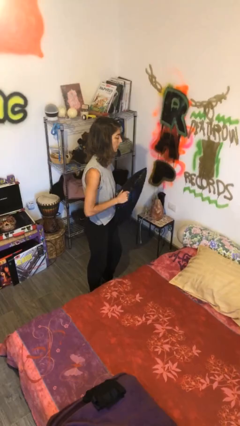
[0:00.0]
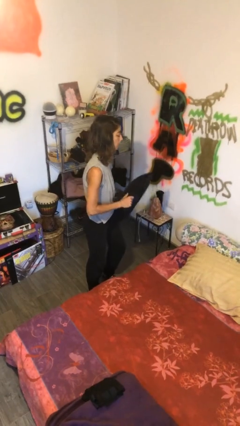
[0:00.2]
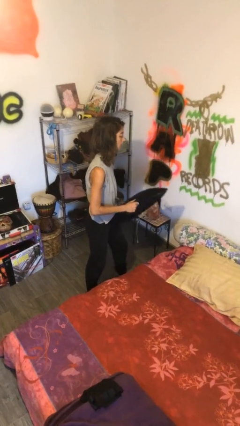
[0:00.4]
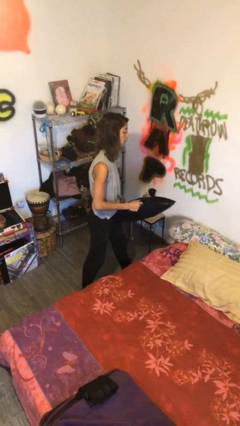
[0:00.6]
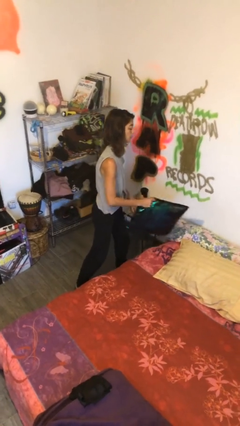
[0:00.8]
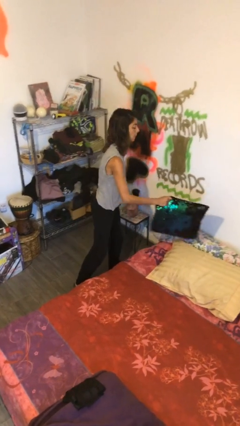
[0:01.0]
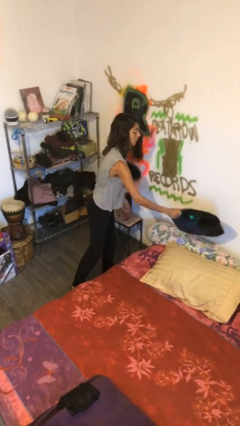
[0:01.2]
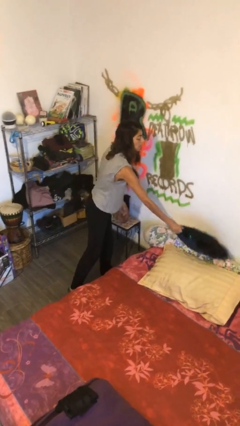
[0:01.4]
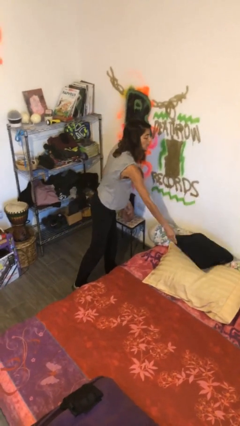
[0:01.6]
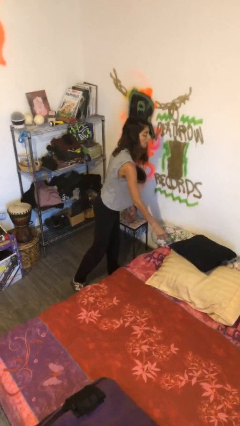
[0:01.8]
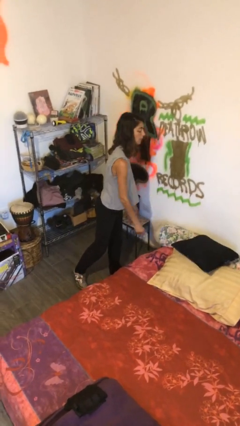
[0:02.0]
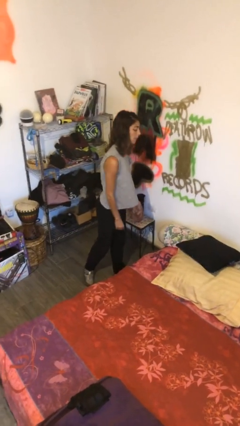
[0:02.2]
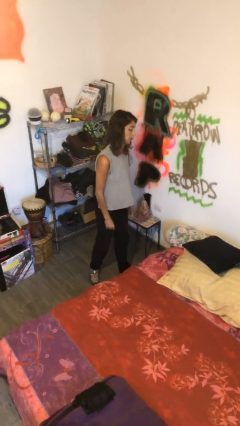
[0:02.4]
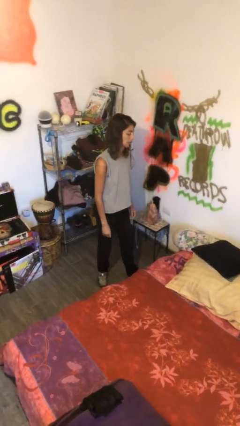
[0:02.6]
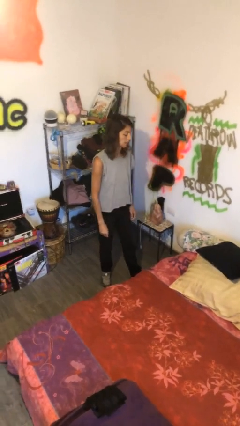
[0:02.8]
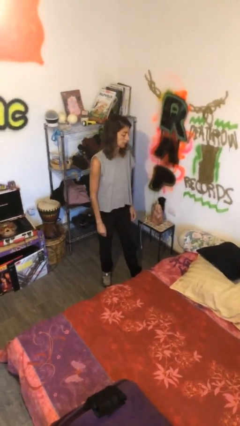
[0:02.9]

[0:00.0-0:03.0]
person puts down object on bed

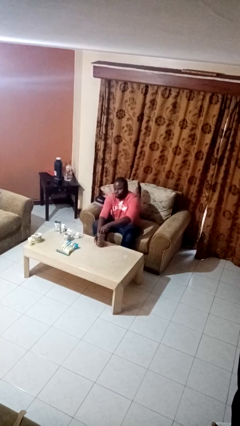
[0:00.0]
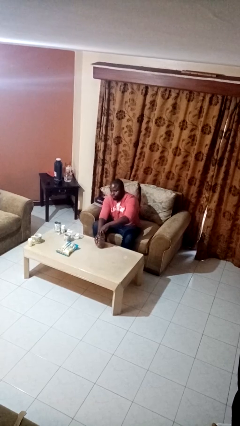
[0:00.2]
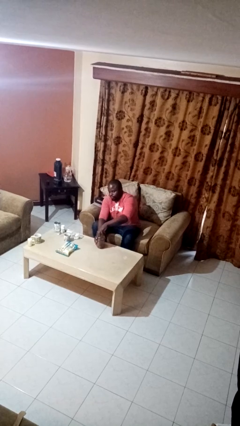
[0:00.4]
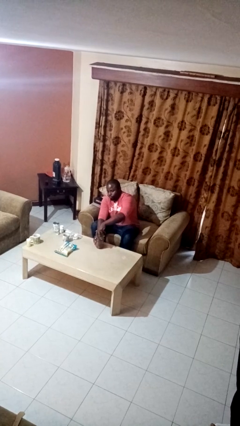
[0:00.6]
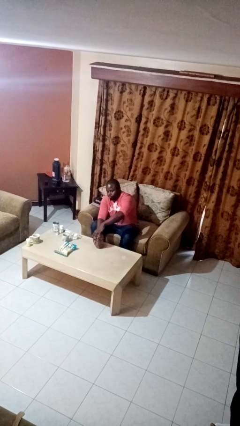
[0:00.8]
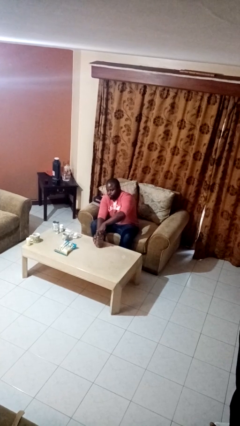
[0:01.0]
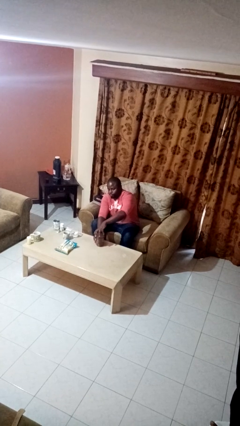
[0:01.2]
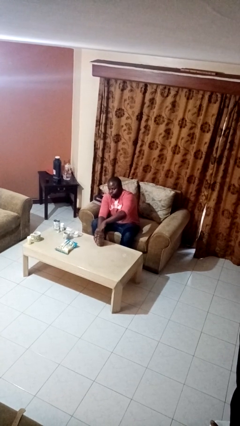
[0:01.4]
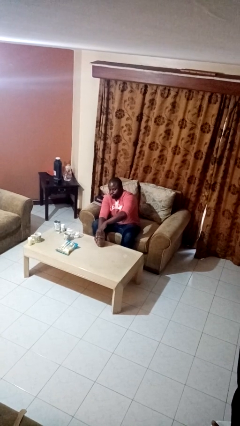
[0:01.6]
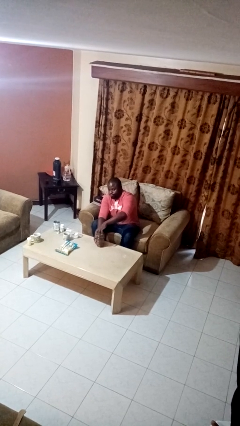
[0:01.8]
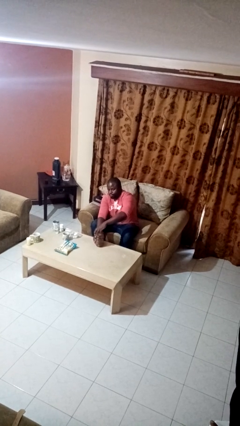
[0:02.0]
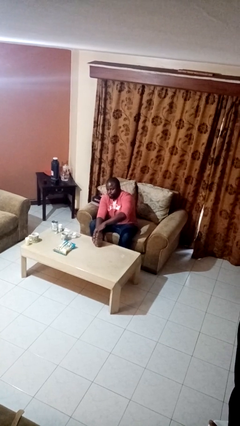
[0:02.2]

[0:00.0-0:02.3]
person closes jar

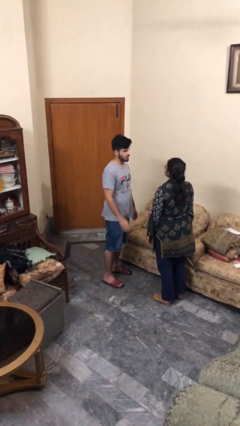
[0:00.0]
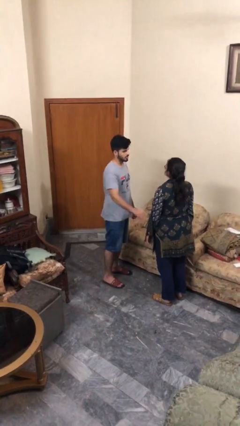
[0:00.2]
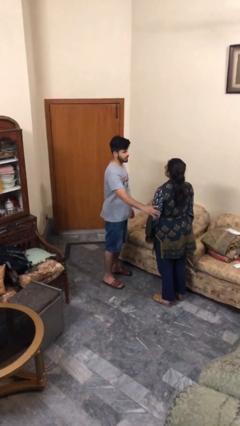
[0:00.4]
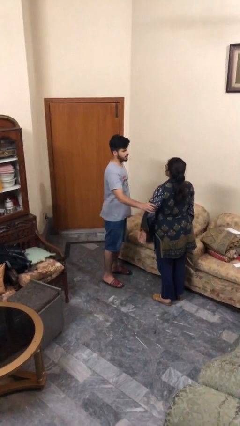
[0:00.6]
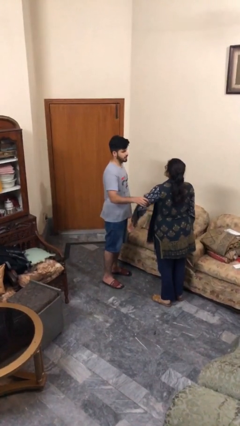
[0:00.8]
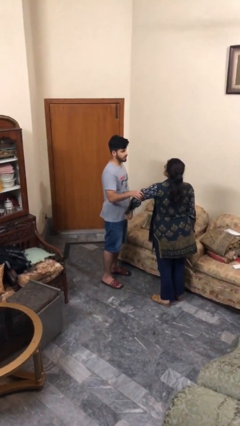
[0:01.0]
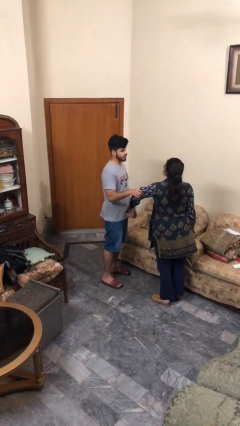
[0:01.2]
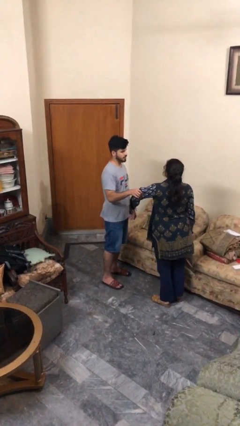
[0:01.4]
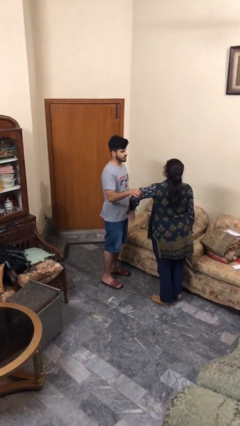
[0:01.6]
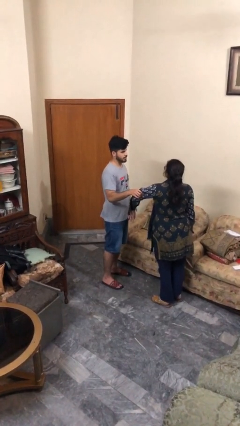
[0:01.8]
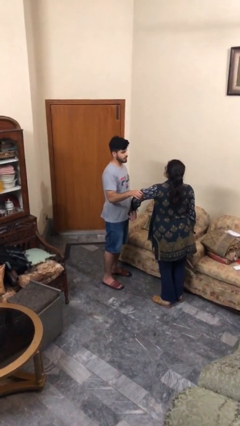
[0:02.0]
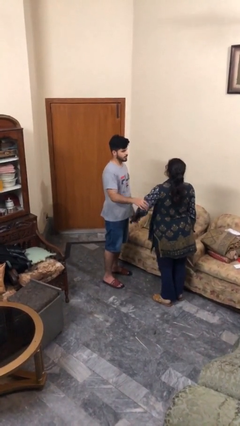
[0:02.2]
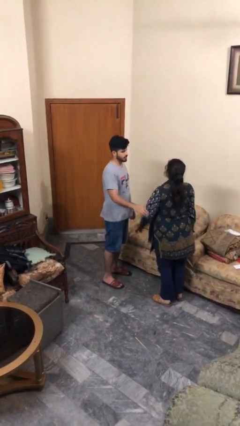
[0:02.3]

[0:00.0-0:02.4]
person grabs person by bicep

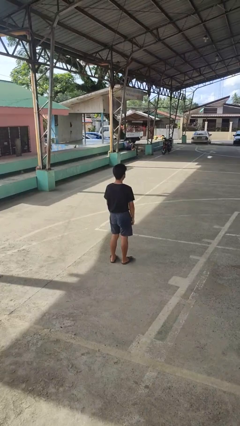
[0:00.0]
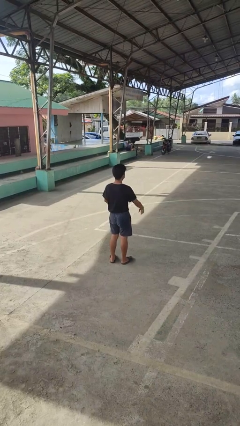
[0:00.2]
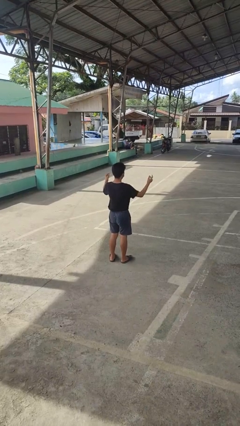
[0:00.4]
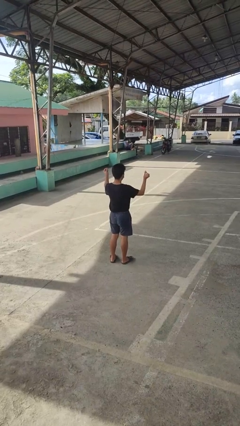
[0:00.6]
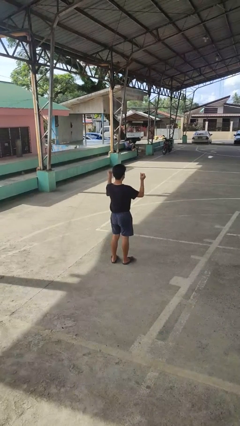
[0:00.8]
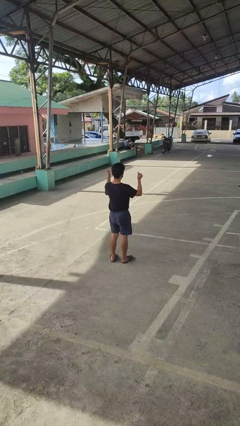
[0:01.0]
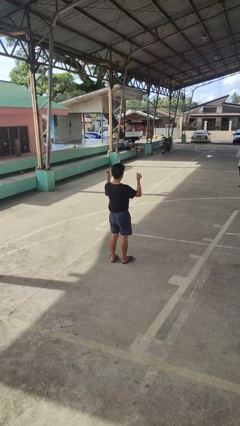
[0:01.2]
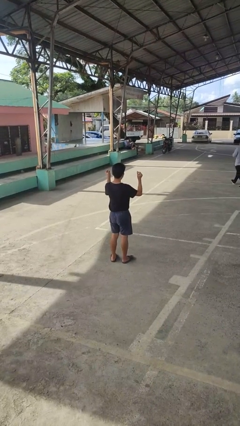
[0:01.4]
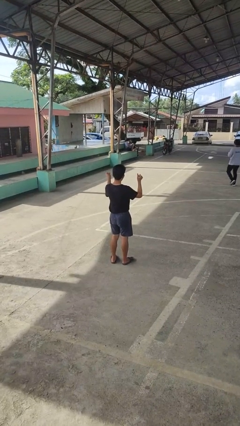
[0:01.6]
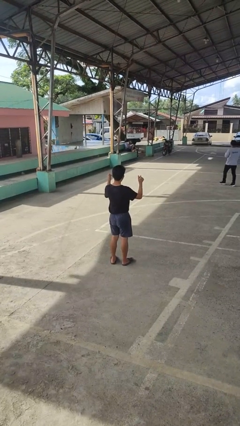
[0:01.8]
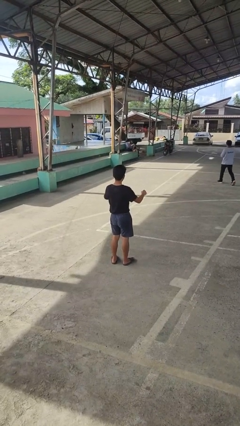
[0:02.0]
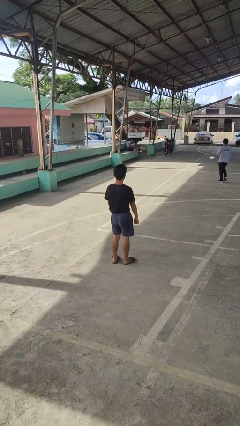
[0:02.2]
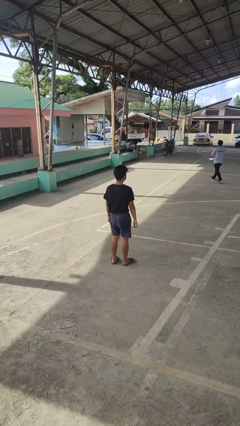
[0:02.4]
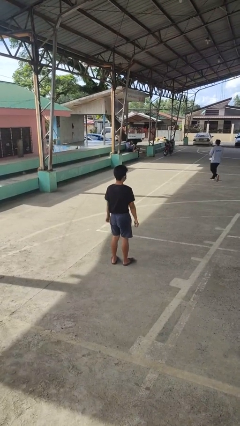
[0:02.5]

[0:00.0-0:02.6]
person snaps fingers

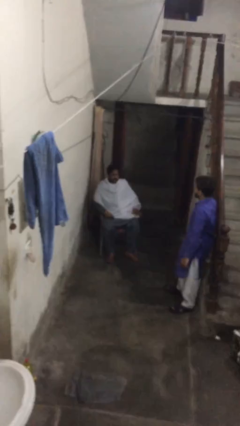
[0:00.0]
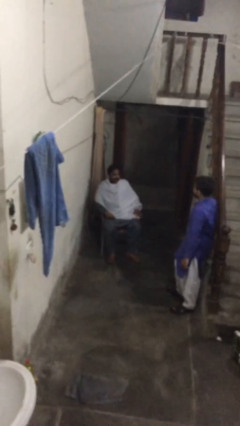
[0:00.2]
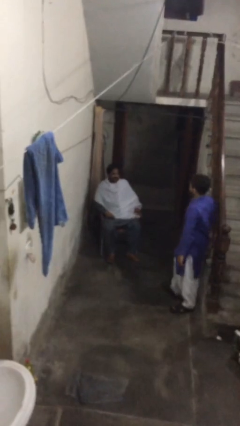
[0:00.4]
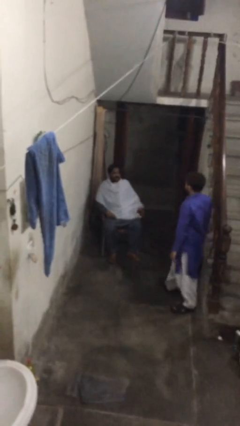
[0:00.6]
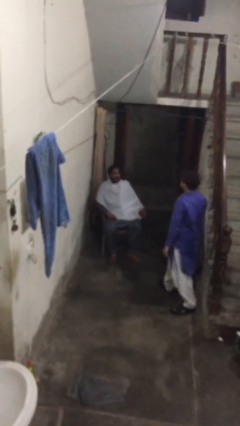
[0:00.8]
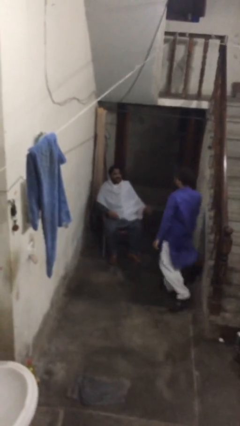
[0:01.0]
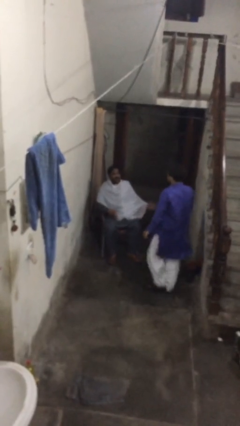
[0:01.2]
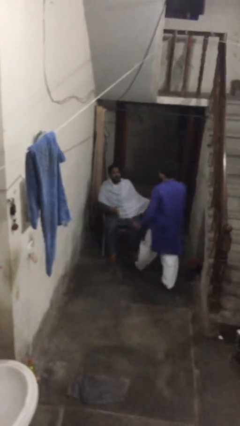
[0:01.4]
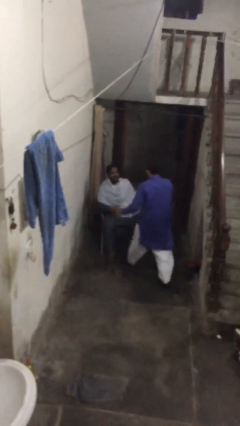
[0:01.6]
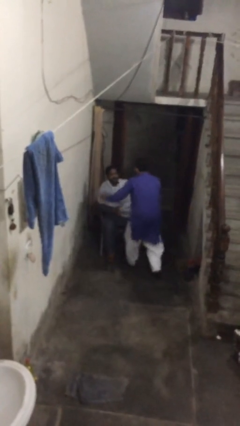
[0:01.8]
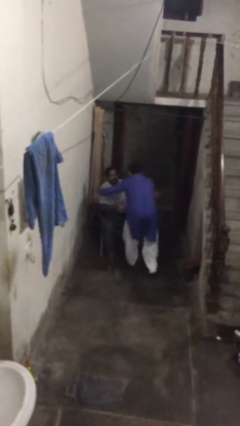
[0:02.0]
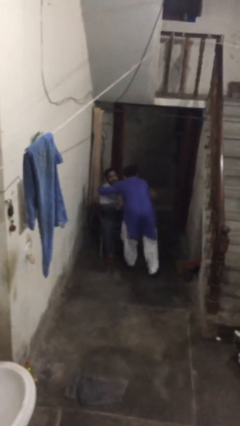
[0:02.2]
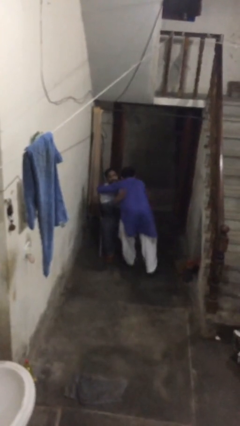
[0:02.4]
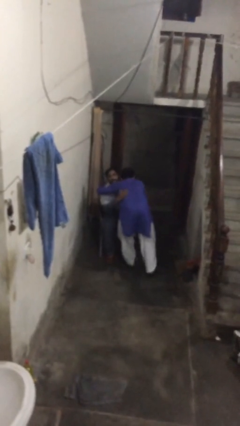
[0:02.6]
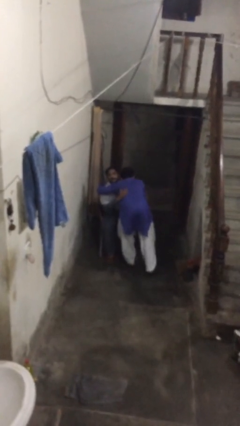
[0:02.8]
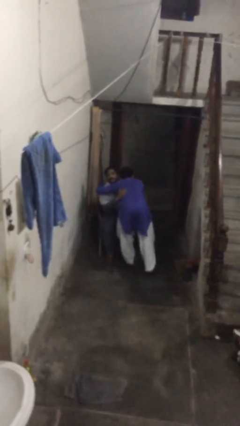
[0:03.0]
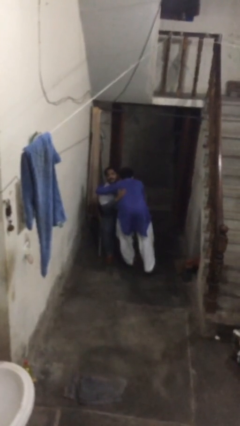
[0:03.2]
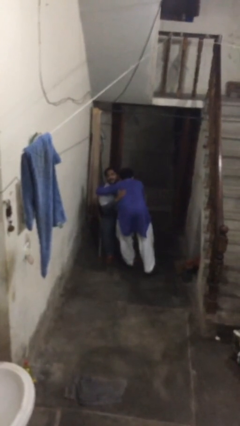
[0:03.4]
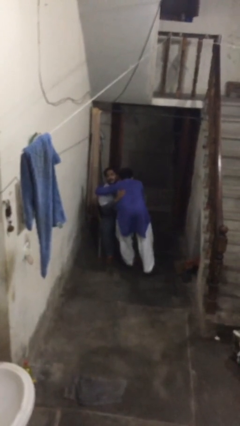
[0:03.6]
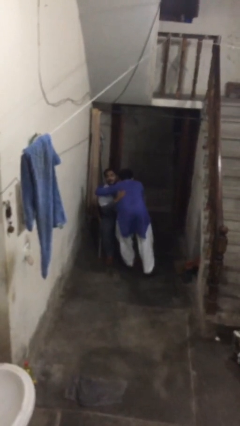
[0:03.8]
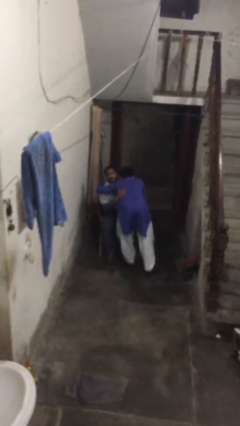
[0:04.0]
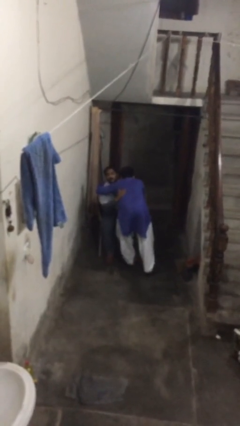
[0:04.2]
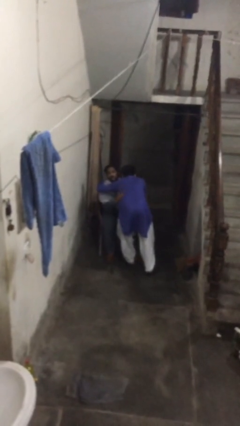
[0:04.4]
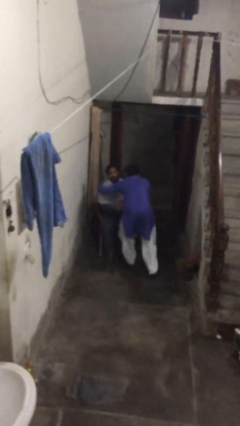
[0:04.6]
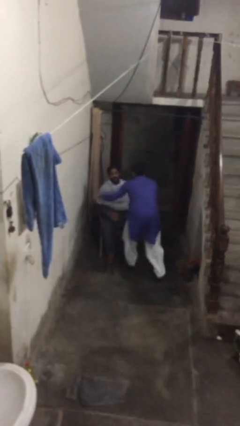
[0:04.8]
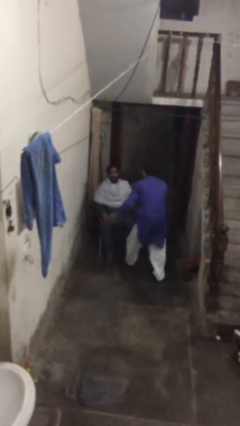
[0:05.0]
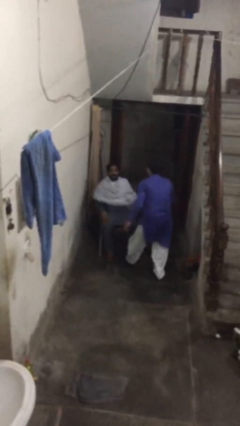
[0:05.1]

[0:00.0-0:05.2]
person embraces person

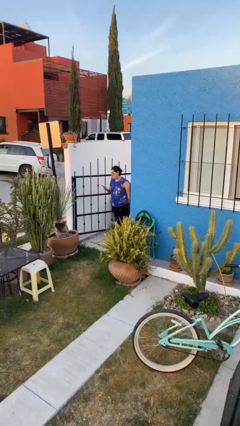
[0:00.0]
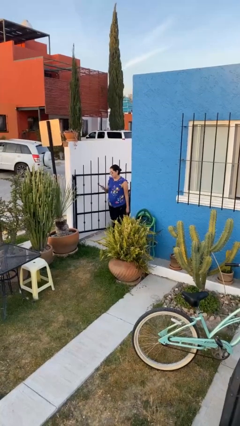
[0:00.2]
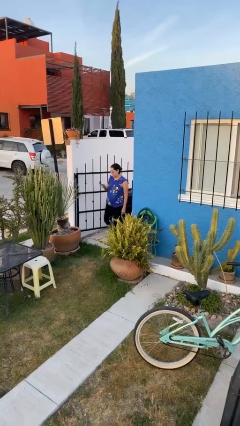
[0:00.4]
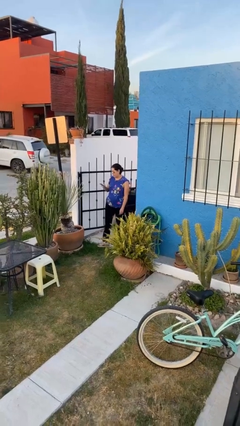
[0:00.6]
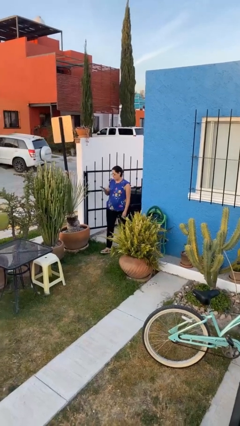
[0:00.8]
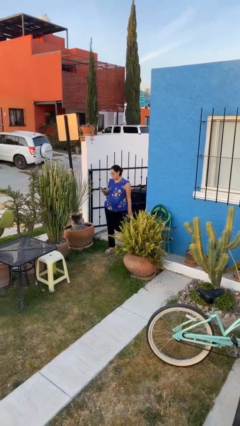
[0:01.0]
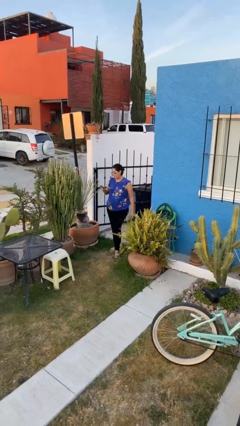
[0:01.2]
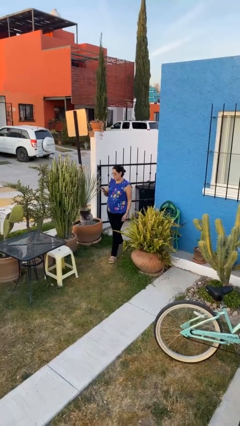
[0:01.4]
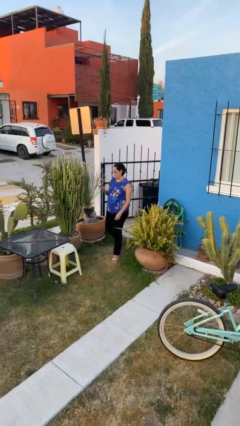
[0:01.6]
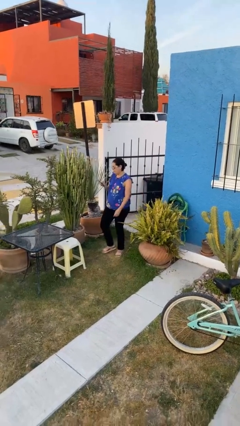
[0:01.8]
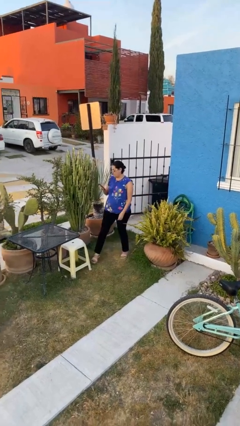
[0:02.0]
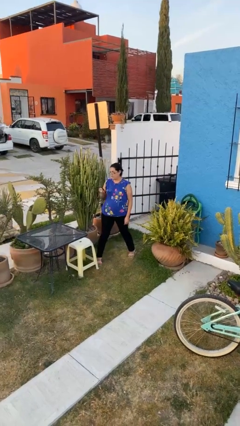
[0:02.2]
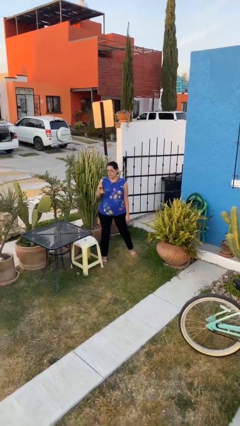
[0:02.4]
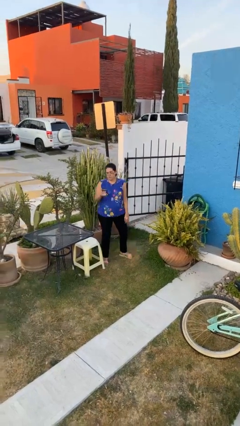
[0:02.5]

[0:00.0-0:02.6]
person enters scene through structure
